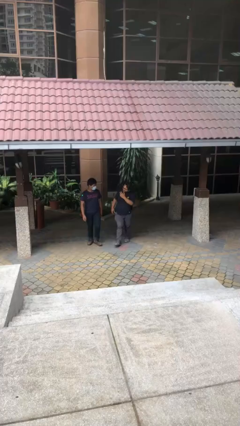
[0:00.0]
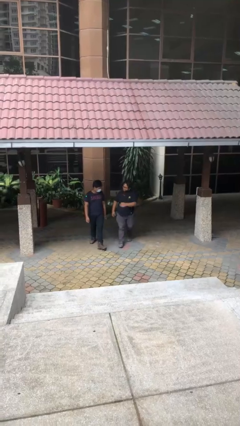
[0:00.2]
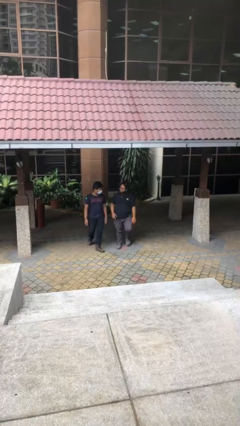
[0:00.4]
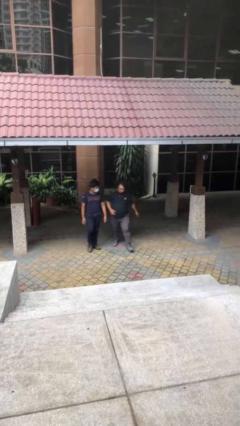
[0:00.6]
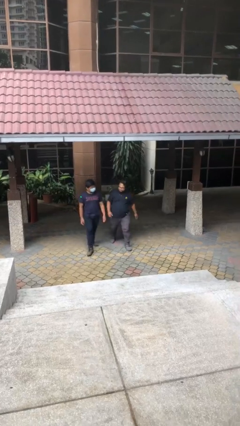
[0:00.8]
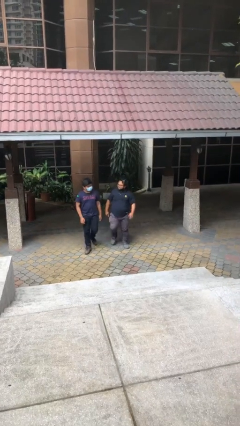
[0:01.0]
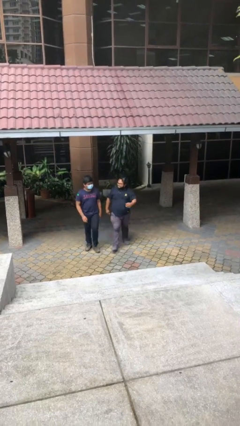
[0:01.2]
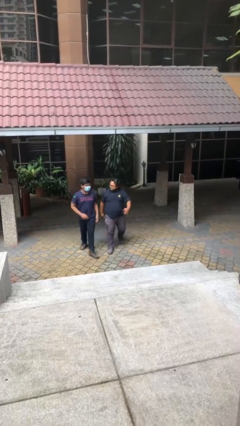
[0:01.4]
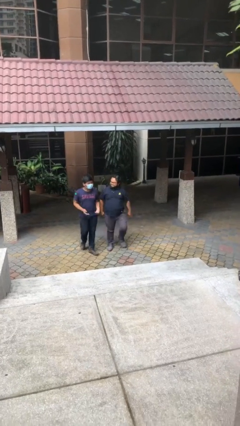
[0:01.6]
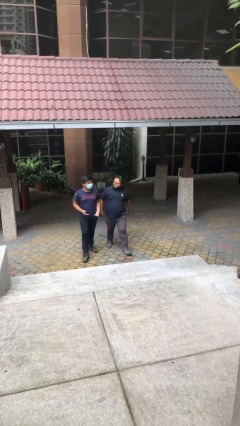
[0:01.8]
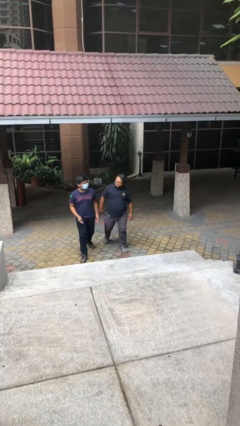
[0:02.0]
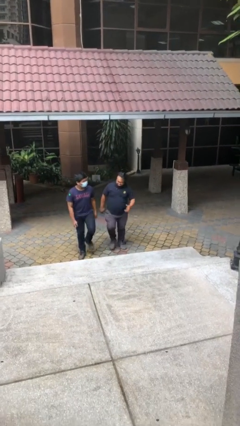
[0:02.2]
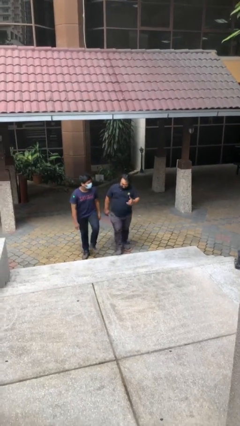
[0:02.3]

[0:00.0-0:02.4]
person talks to person

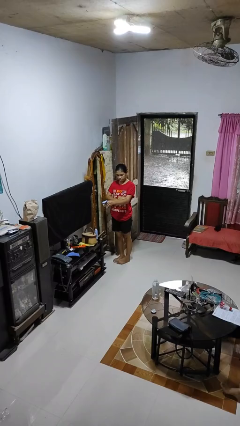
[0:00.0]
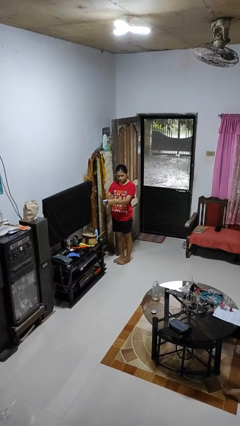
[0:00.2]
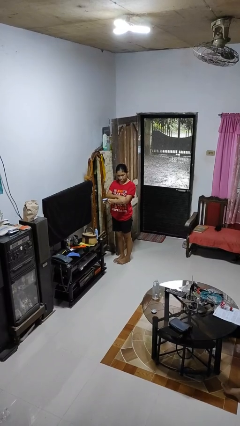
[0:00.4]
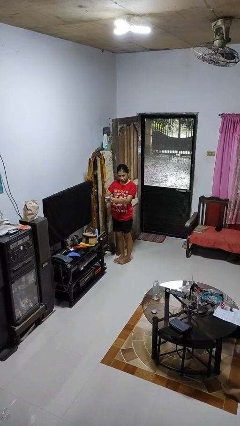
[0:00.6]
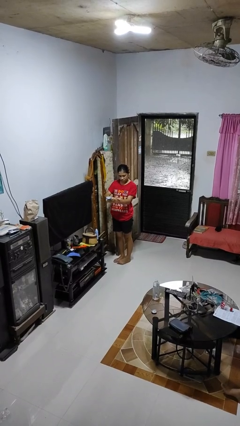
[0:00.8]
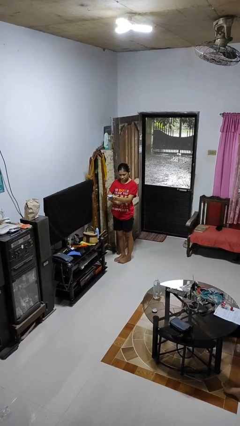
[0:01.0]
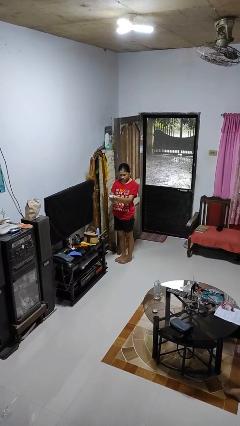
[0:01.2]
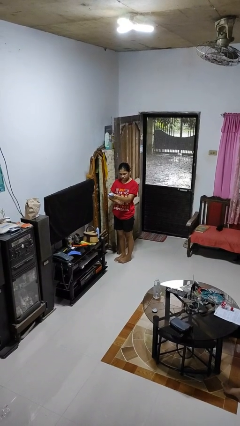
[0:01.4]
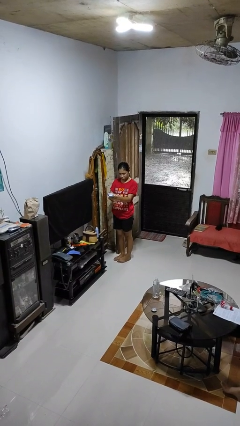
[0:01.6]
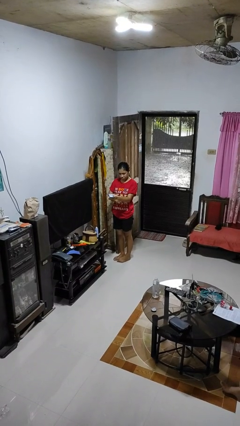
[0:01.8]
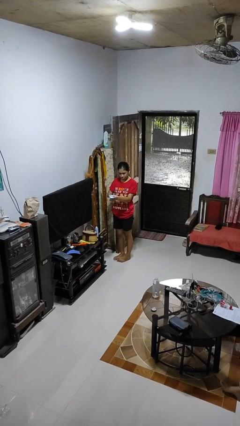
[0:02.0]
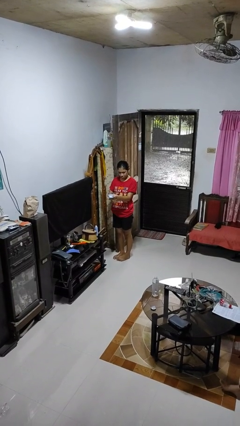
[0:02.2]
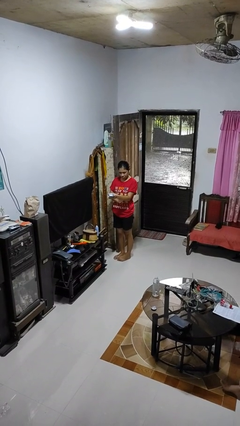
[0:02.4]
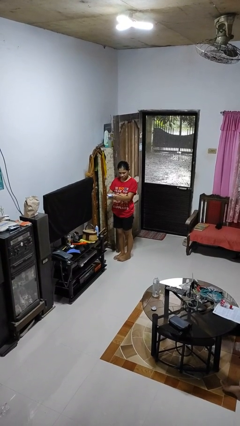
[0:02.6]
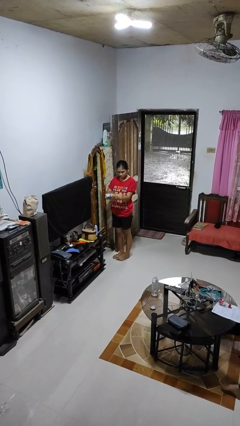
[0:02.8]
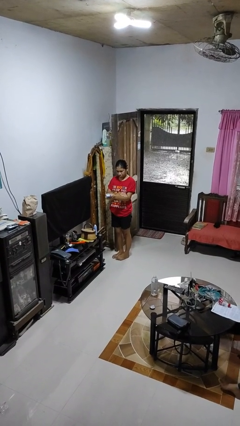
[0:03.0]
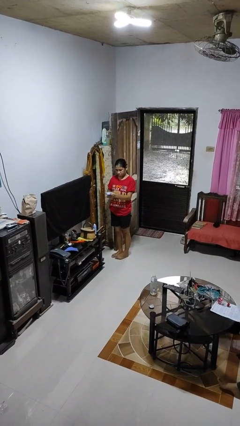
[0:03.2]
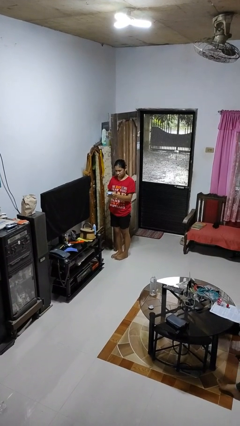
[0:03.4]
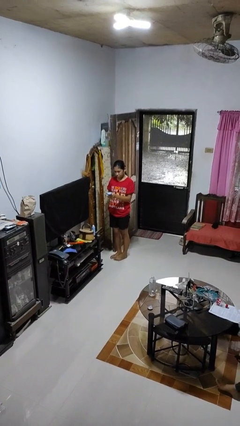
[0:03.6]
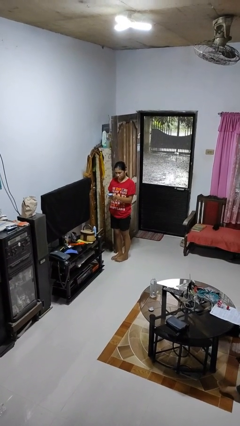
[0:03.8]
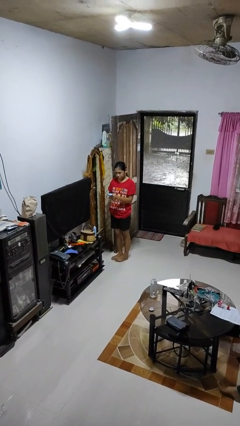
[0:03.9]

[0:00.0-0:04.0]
person applies sunscreen

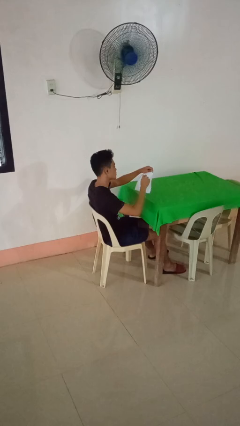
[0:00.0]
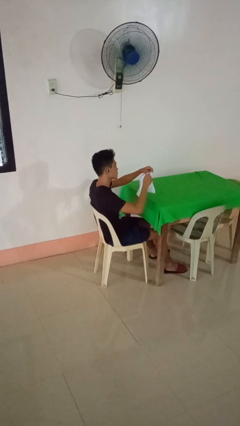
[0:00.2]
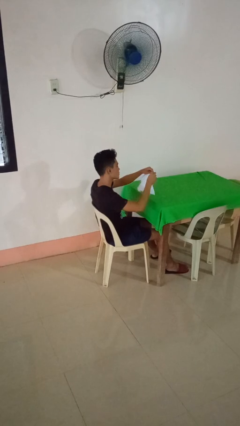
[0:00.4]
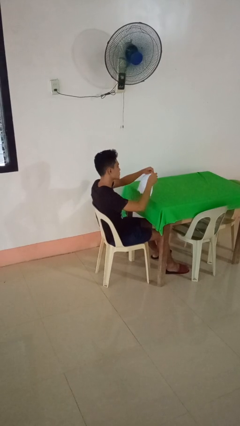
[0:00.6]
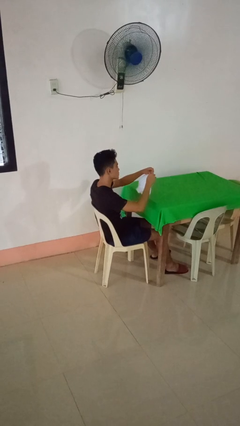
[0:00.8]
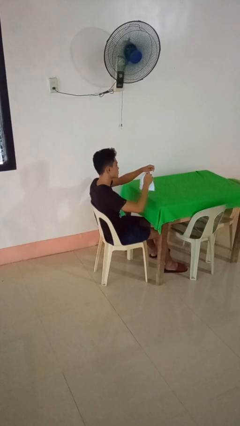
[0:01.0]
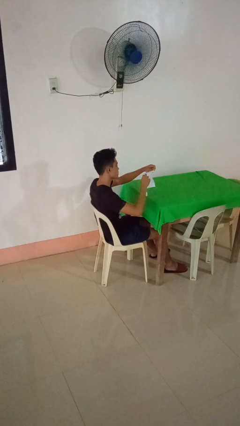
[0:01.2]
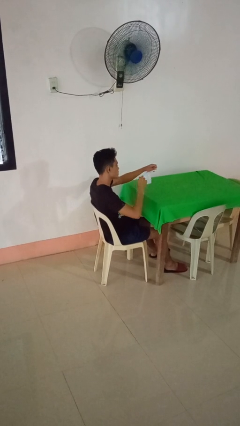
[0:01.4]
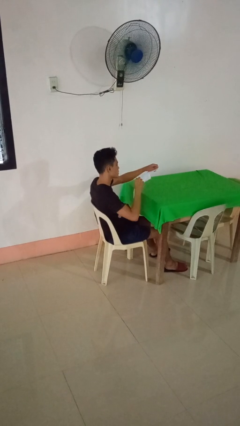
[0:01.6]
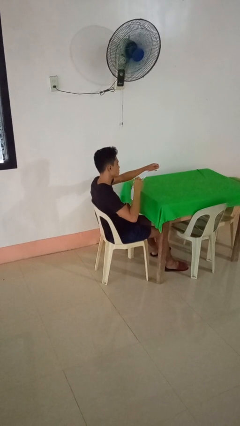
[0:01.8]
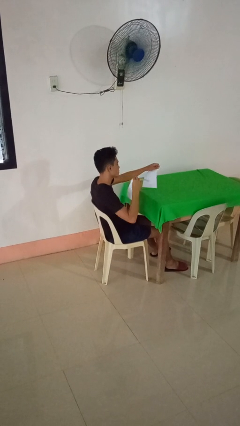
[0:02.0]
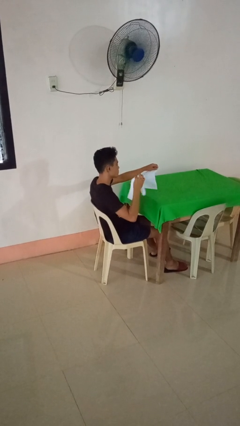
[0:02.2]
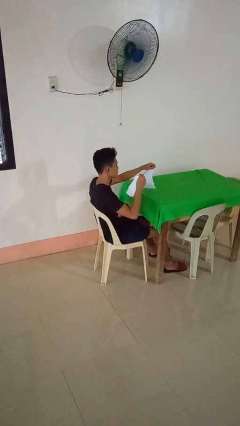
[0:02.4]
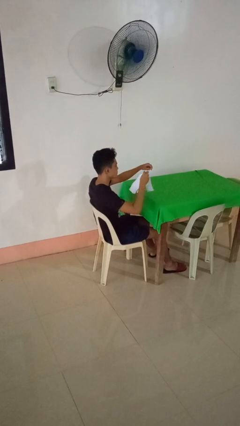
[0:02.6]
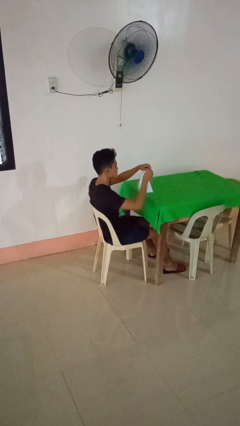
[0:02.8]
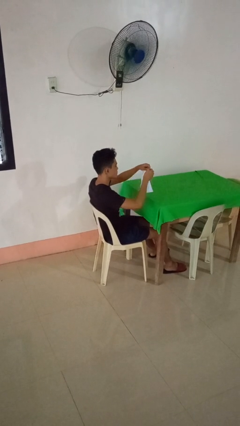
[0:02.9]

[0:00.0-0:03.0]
person tears paper

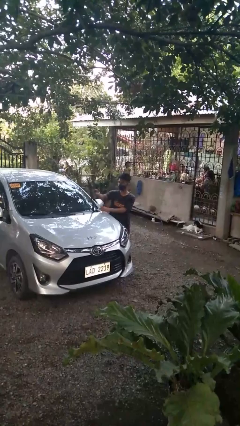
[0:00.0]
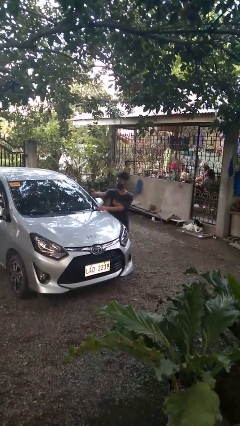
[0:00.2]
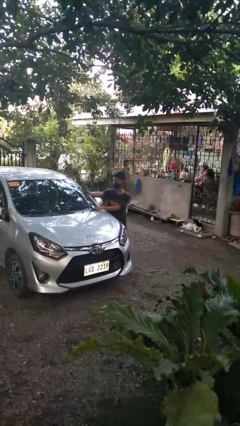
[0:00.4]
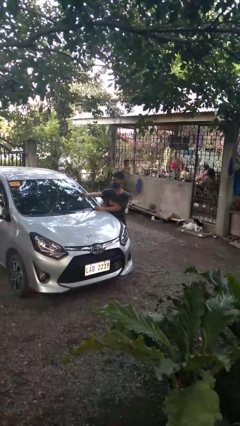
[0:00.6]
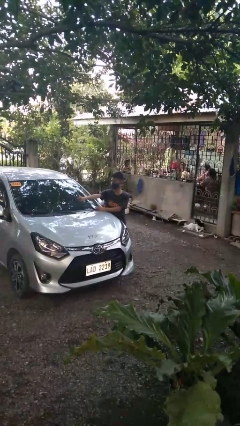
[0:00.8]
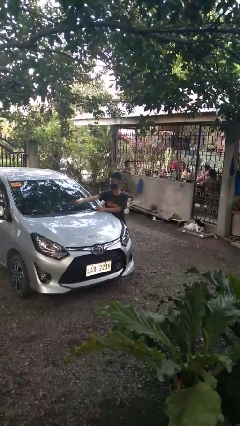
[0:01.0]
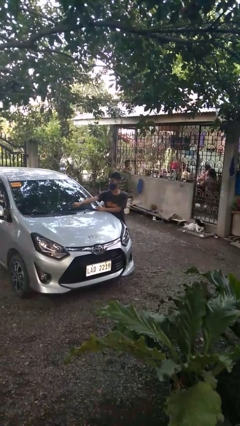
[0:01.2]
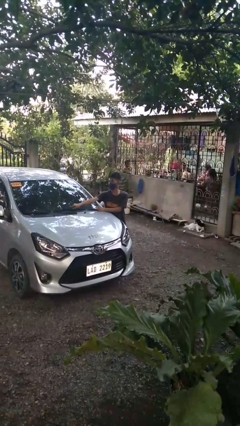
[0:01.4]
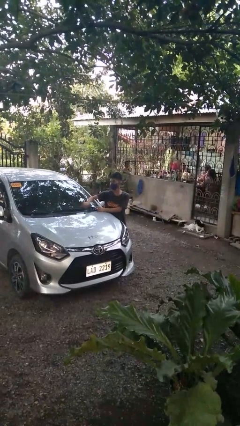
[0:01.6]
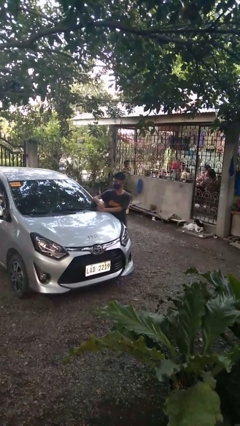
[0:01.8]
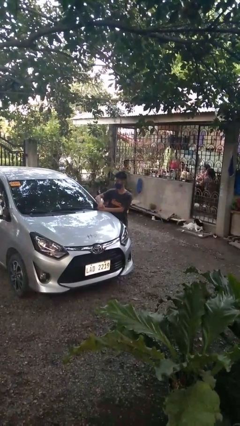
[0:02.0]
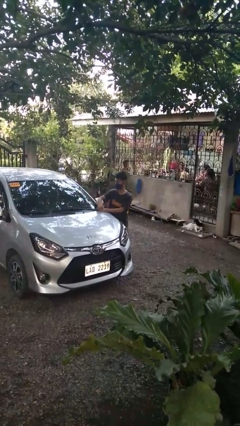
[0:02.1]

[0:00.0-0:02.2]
person flips down car wipers

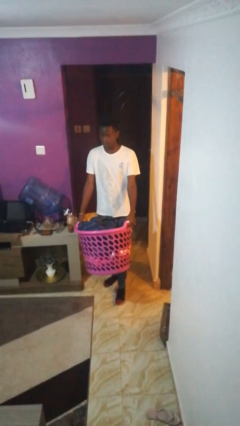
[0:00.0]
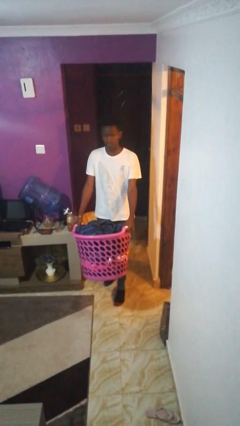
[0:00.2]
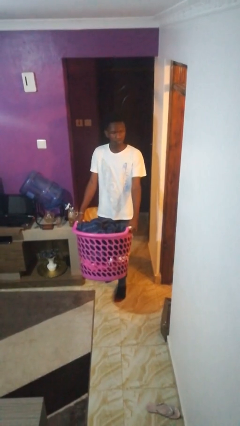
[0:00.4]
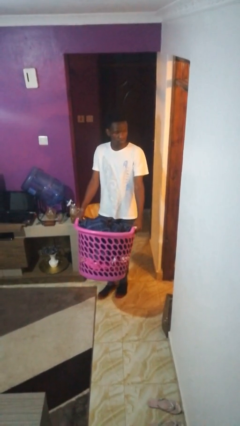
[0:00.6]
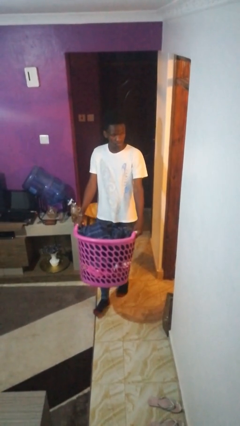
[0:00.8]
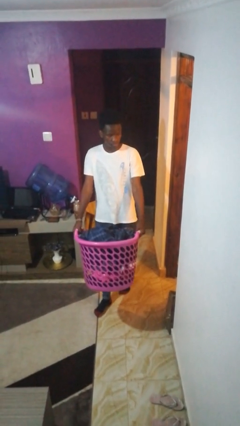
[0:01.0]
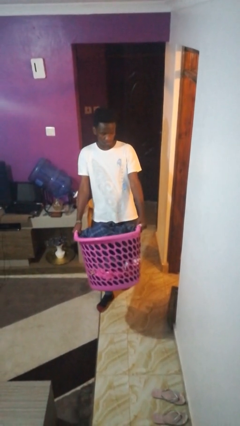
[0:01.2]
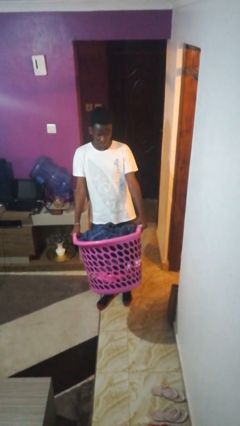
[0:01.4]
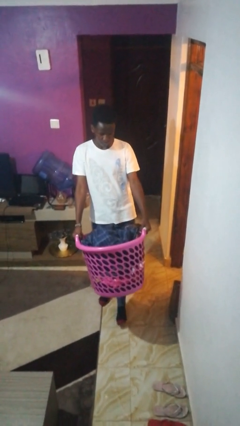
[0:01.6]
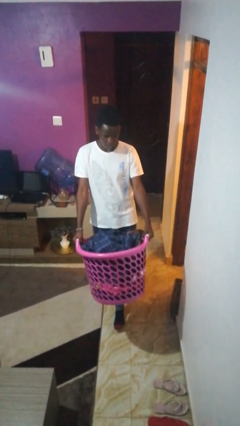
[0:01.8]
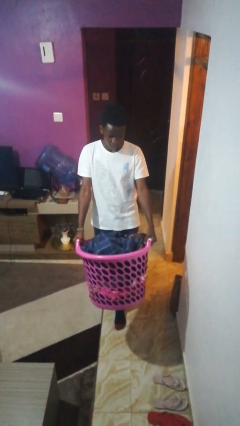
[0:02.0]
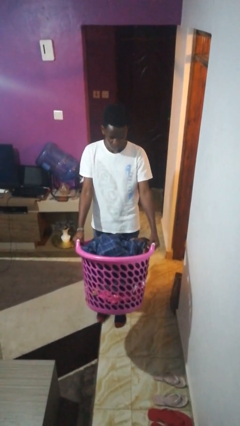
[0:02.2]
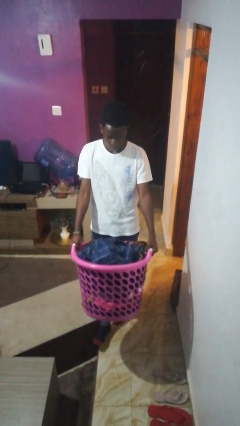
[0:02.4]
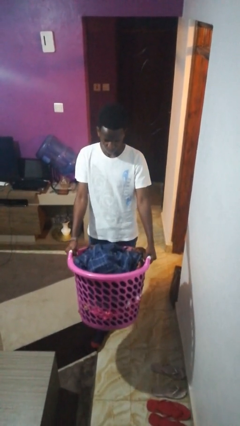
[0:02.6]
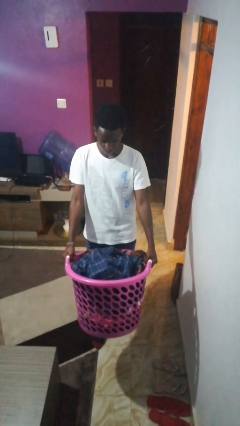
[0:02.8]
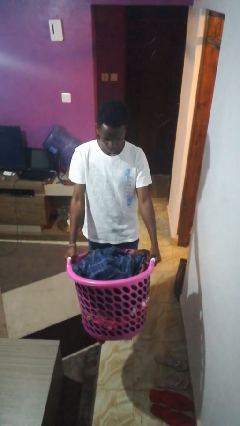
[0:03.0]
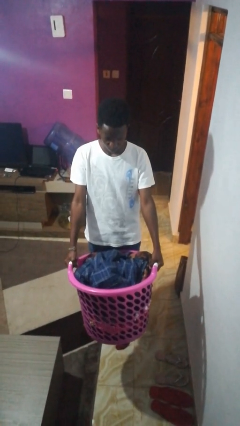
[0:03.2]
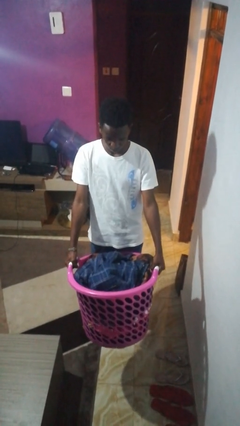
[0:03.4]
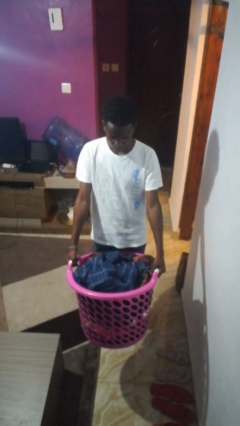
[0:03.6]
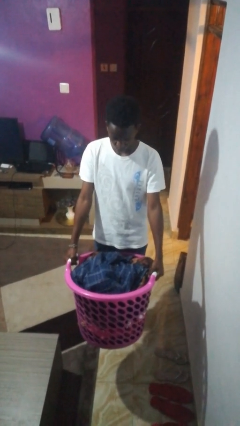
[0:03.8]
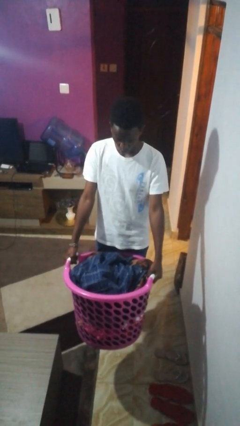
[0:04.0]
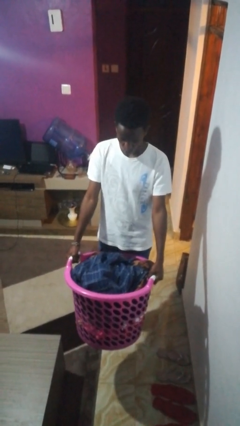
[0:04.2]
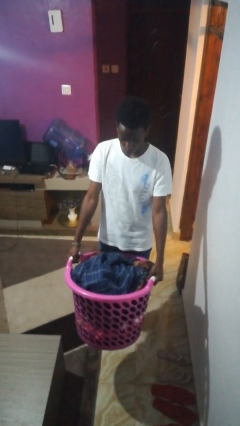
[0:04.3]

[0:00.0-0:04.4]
person carries laundry basket

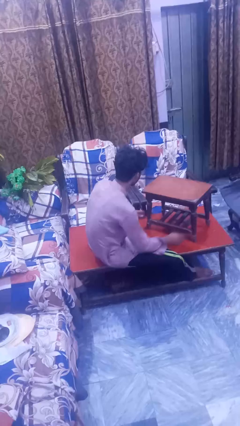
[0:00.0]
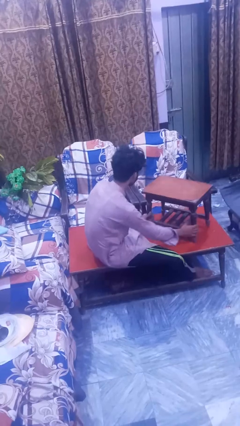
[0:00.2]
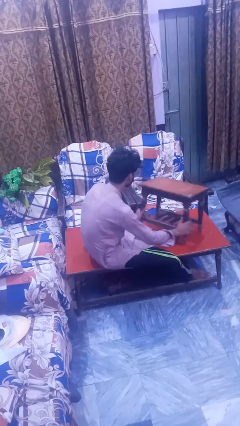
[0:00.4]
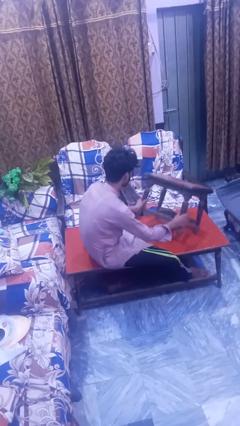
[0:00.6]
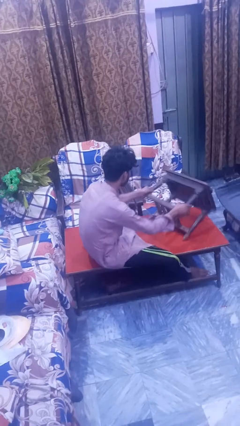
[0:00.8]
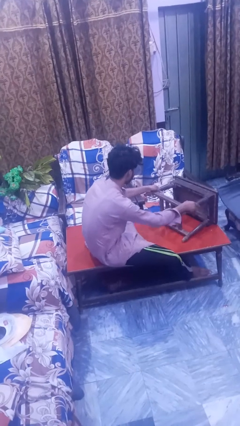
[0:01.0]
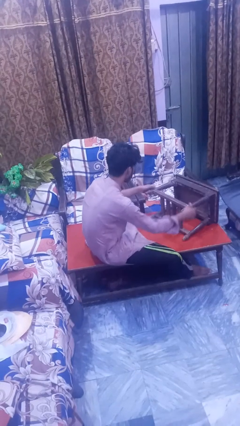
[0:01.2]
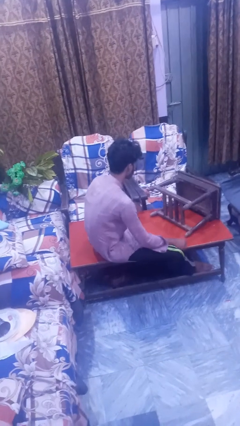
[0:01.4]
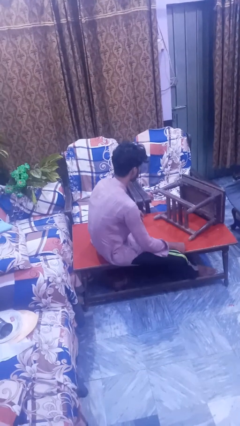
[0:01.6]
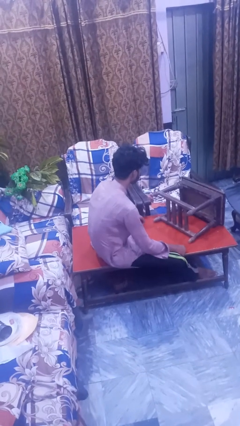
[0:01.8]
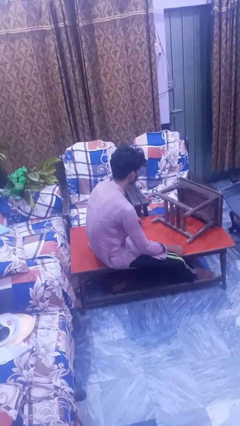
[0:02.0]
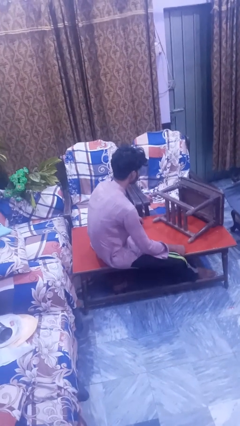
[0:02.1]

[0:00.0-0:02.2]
person knocks over furniture
